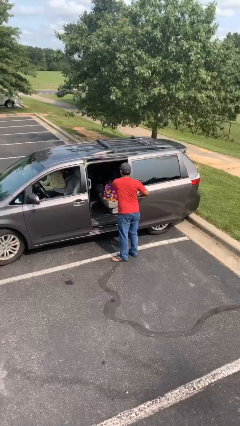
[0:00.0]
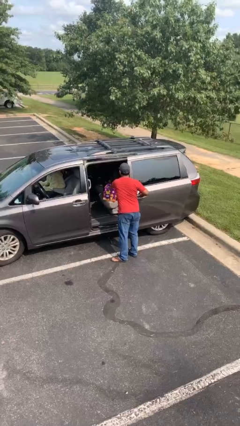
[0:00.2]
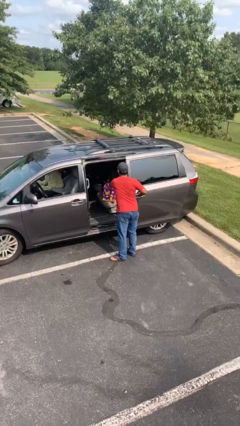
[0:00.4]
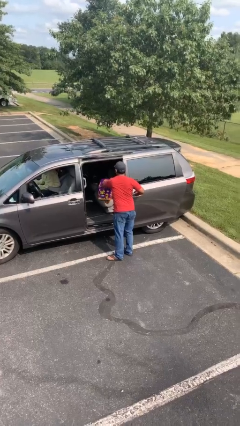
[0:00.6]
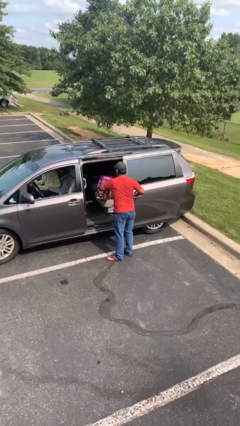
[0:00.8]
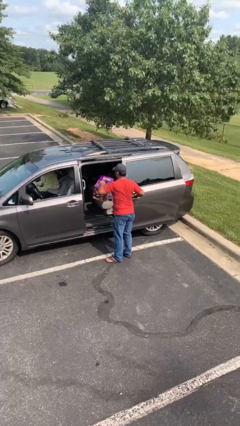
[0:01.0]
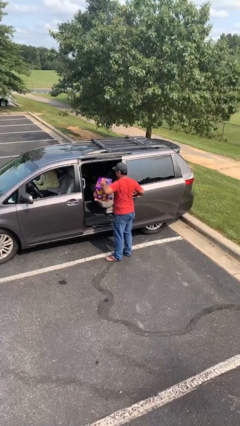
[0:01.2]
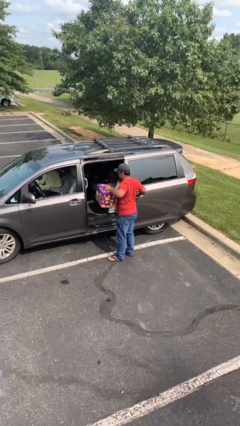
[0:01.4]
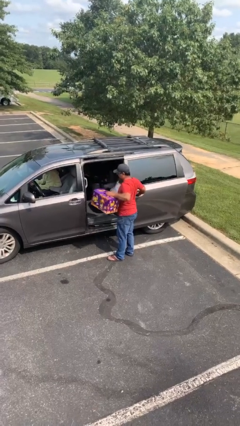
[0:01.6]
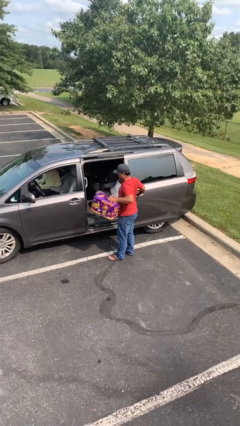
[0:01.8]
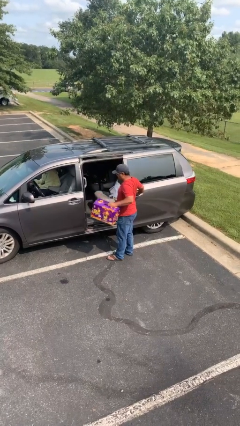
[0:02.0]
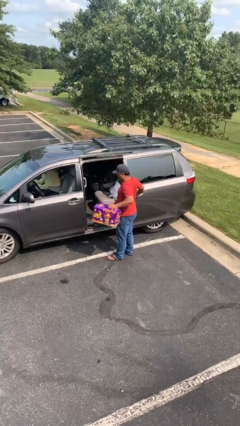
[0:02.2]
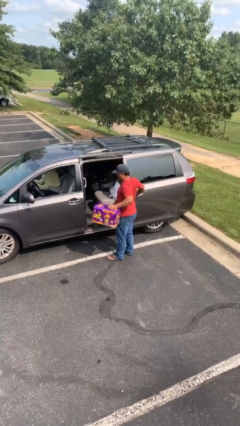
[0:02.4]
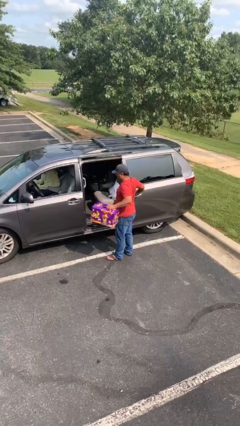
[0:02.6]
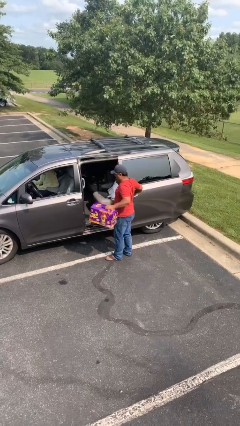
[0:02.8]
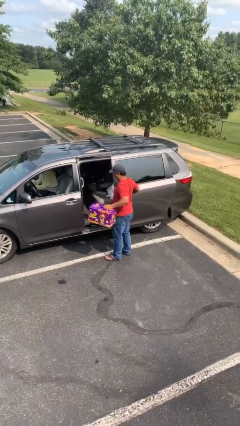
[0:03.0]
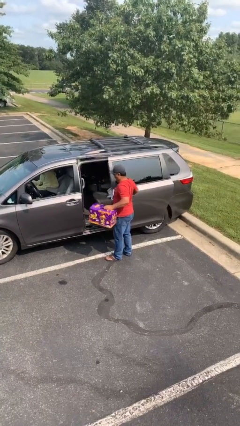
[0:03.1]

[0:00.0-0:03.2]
person unloads car

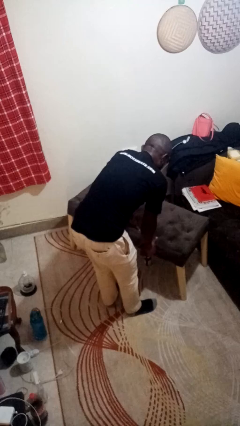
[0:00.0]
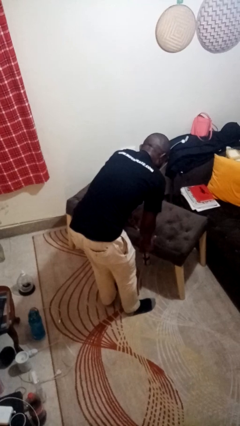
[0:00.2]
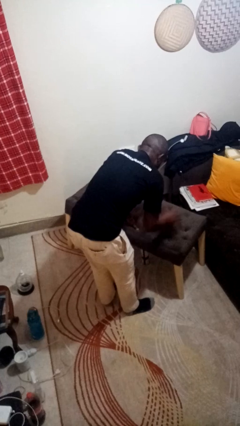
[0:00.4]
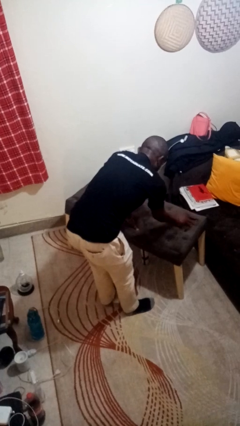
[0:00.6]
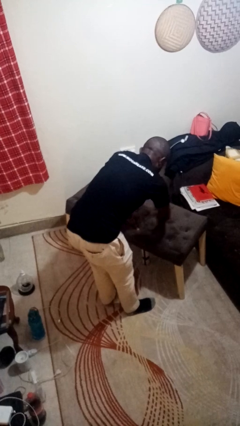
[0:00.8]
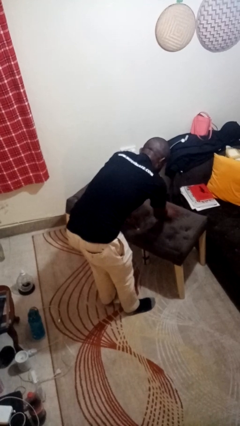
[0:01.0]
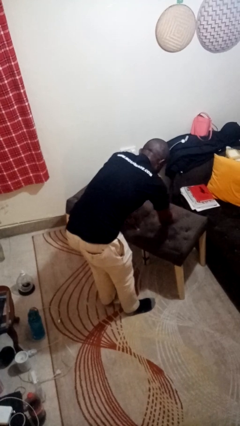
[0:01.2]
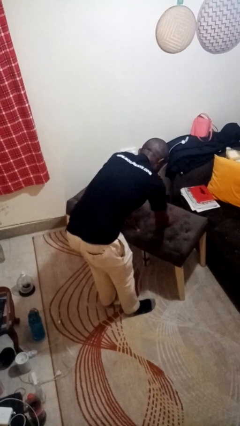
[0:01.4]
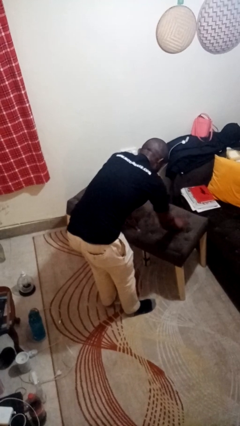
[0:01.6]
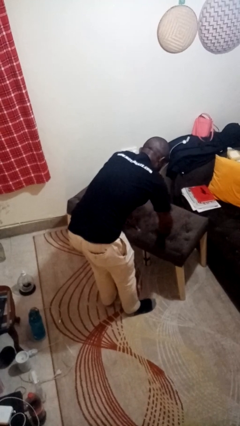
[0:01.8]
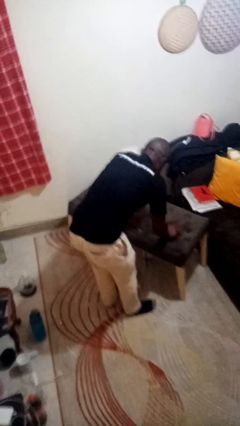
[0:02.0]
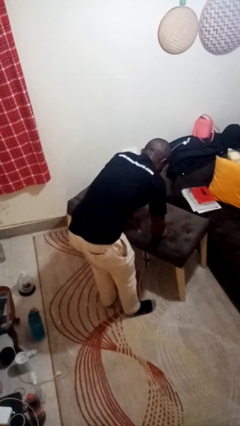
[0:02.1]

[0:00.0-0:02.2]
person cleans table with rag

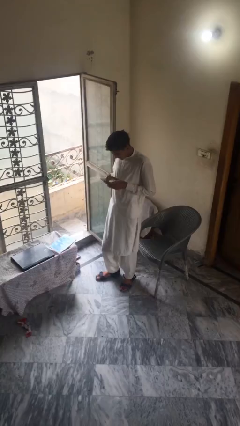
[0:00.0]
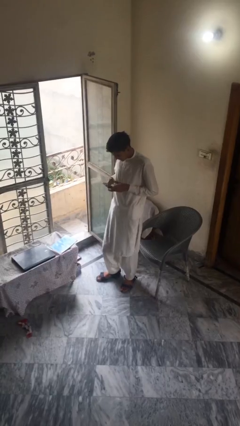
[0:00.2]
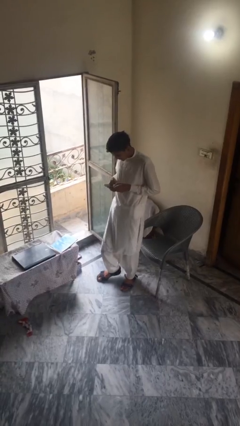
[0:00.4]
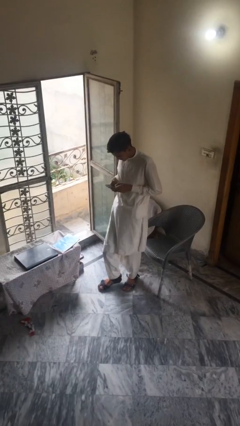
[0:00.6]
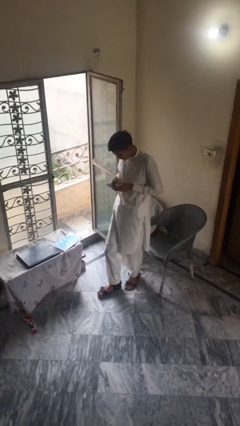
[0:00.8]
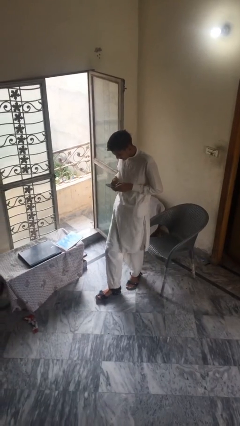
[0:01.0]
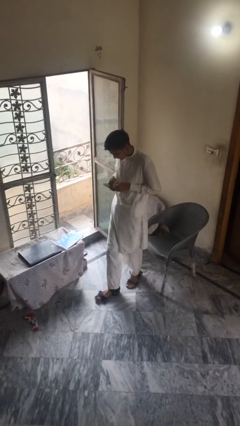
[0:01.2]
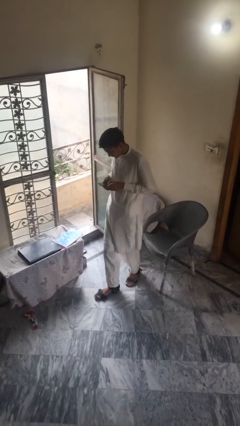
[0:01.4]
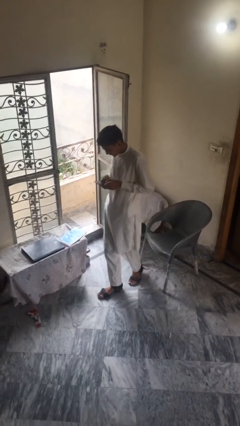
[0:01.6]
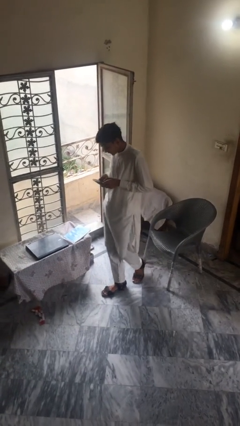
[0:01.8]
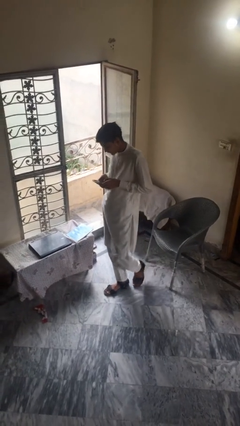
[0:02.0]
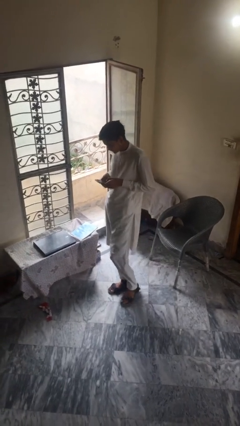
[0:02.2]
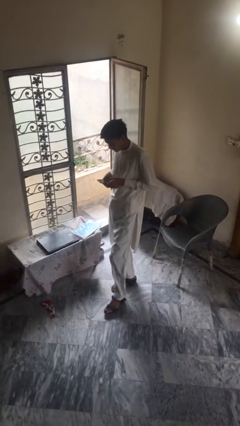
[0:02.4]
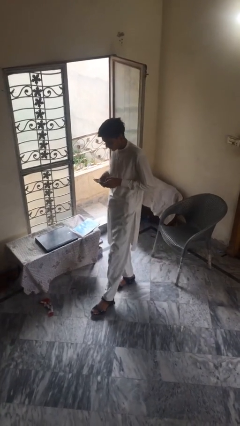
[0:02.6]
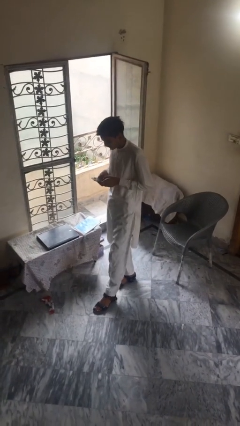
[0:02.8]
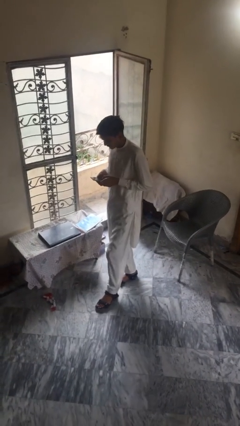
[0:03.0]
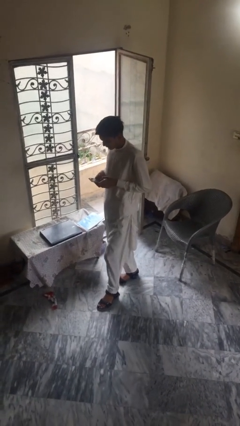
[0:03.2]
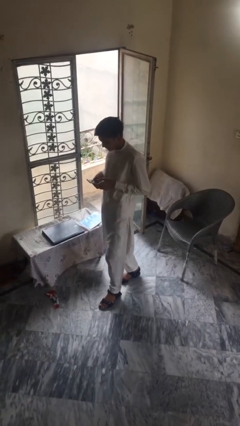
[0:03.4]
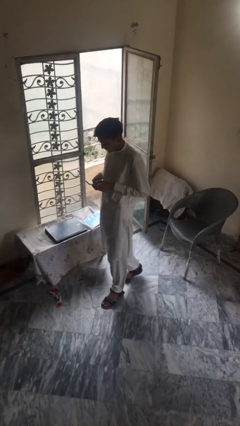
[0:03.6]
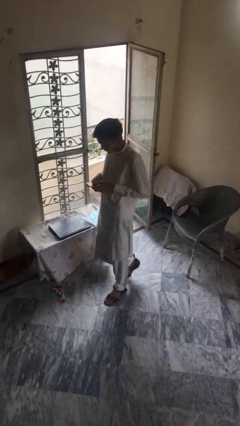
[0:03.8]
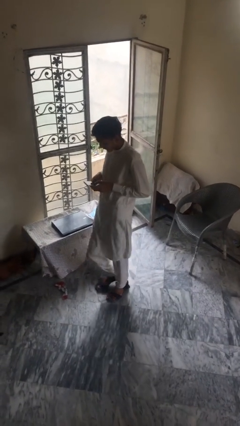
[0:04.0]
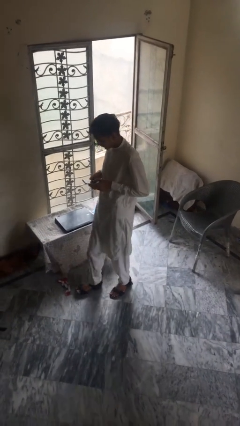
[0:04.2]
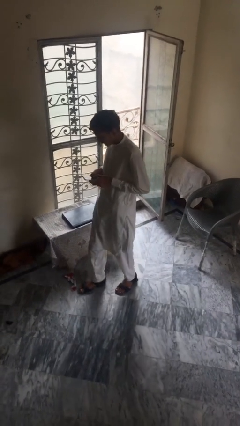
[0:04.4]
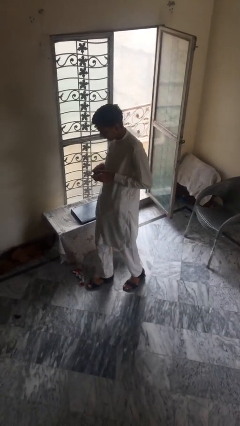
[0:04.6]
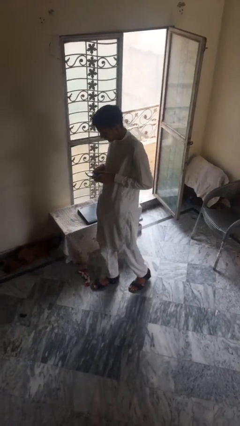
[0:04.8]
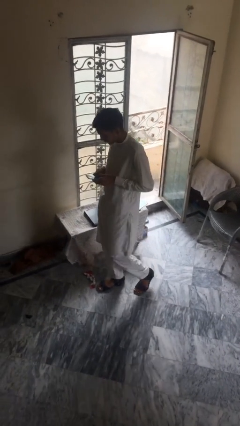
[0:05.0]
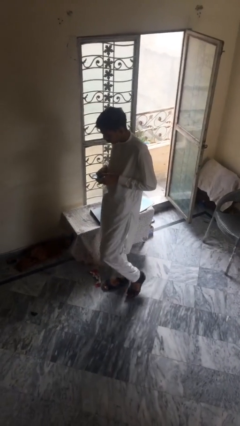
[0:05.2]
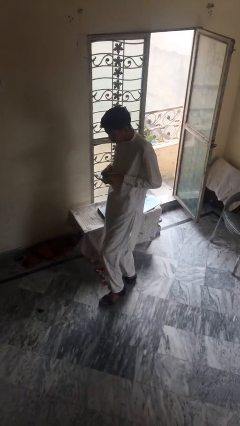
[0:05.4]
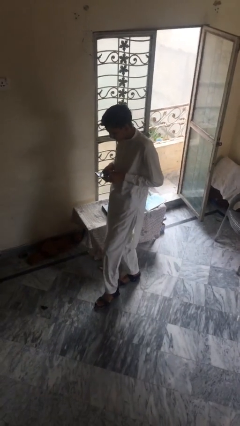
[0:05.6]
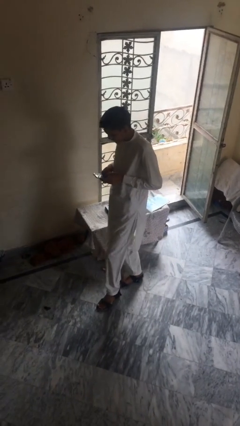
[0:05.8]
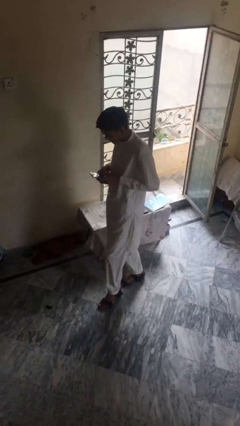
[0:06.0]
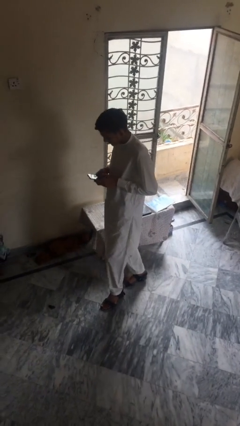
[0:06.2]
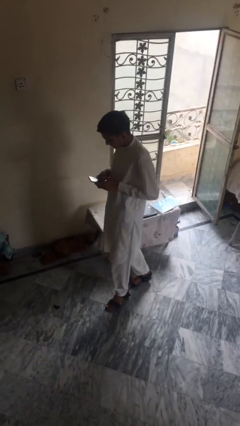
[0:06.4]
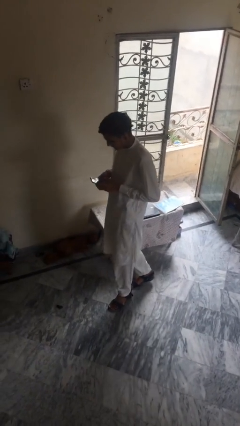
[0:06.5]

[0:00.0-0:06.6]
person texts on phone

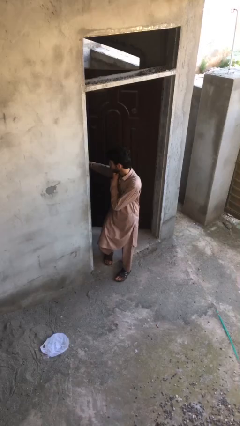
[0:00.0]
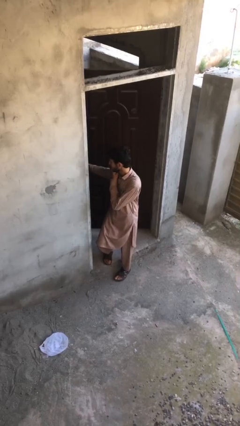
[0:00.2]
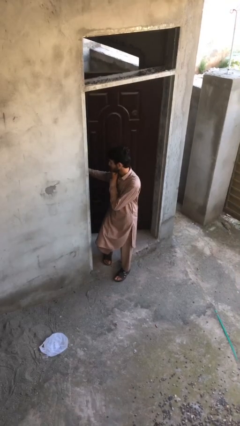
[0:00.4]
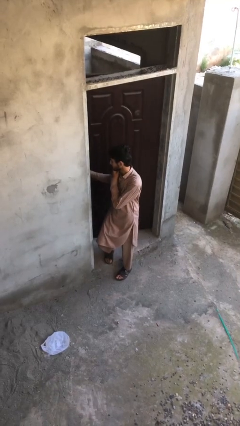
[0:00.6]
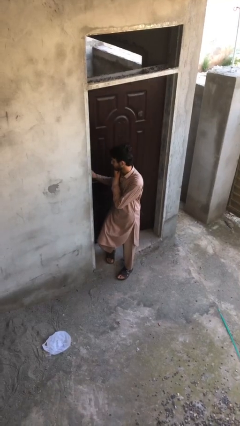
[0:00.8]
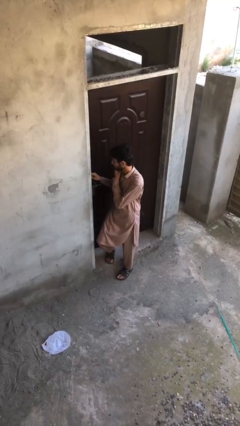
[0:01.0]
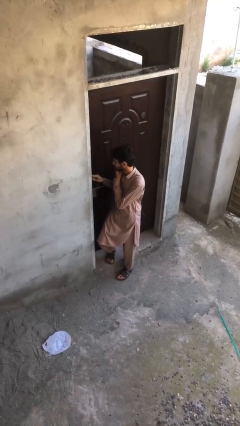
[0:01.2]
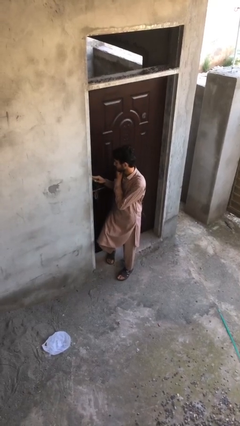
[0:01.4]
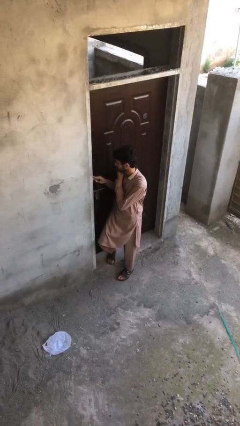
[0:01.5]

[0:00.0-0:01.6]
person closes facility door

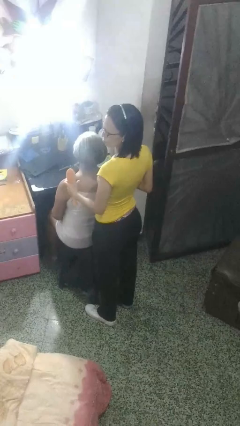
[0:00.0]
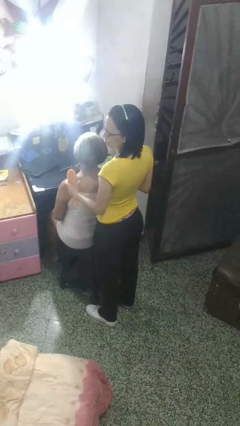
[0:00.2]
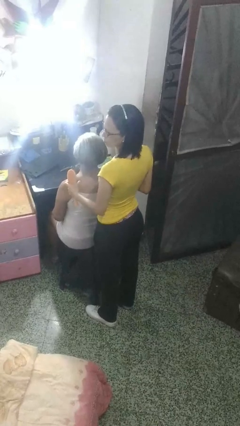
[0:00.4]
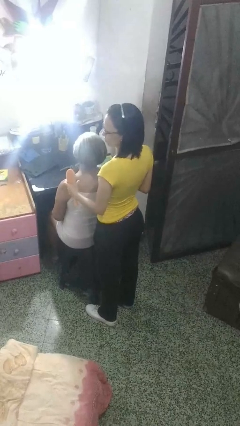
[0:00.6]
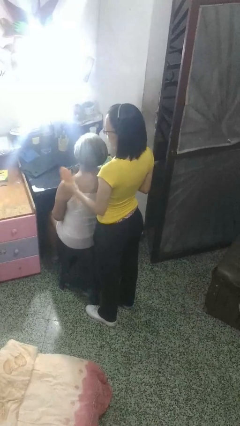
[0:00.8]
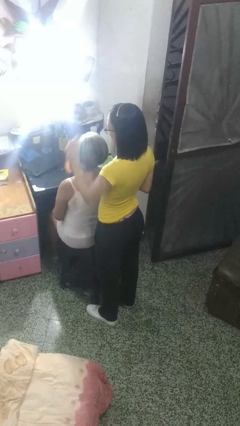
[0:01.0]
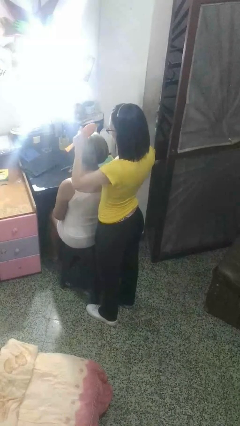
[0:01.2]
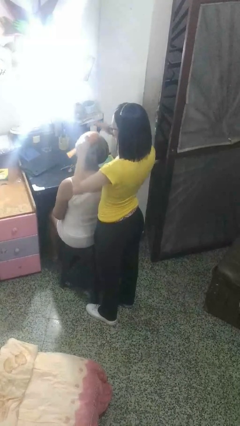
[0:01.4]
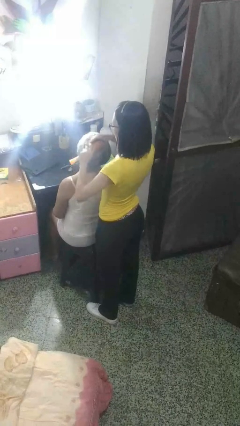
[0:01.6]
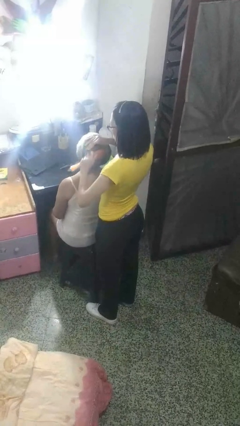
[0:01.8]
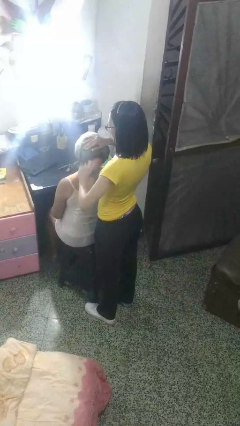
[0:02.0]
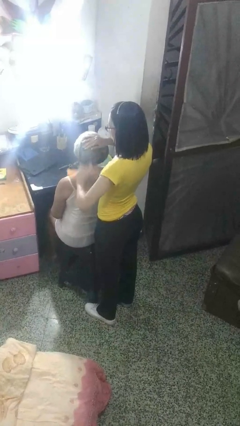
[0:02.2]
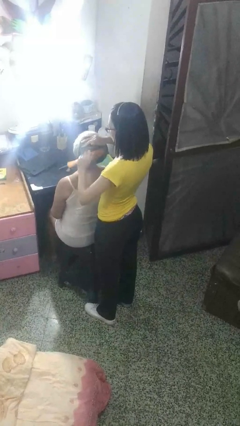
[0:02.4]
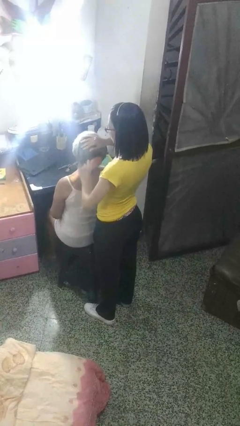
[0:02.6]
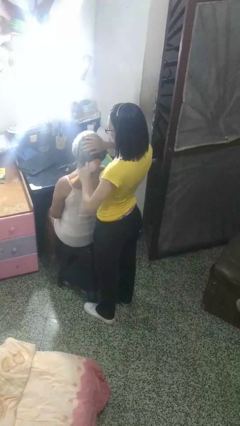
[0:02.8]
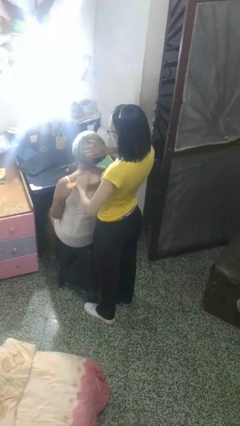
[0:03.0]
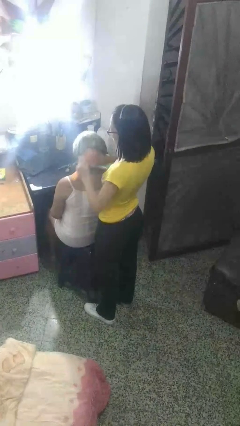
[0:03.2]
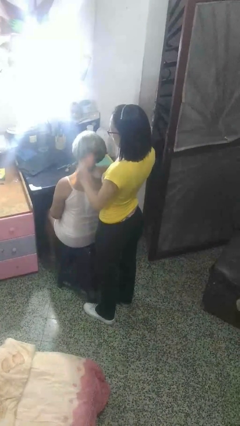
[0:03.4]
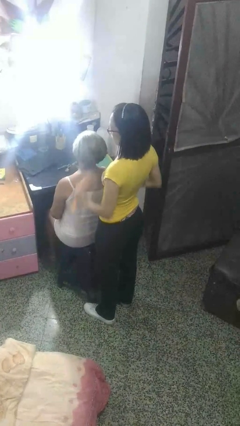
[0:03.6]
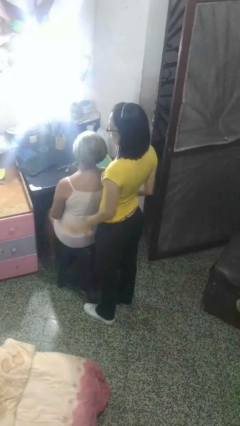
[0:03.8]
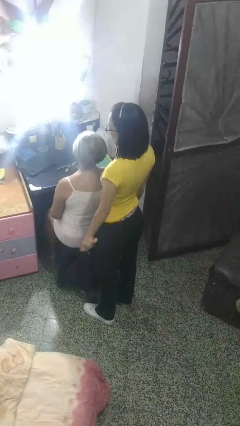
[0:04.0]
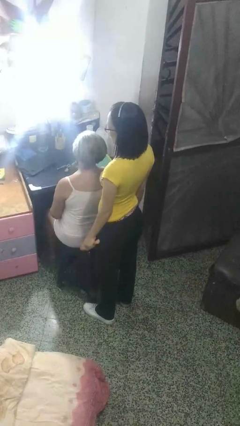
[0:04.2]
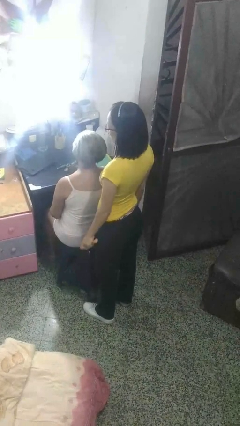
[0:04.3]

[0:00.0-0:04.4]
person brushes hair of person
